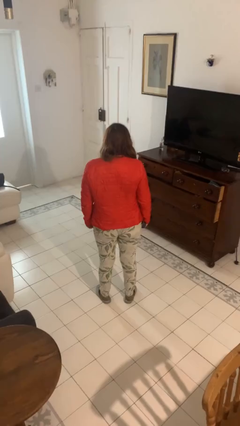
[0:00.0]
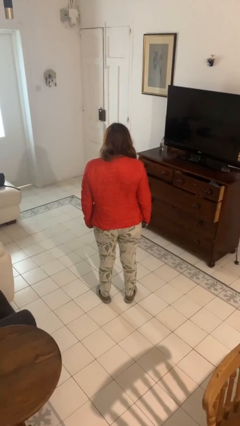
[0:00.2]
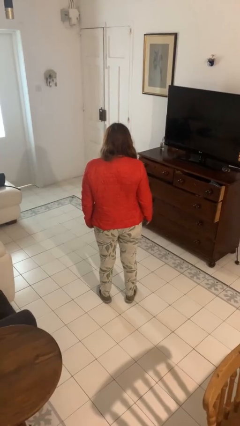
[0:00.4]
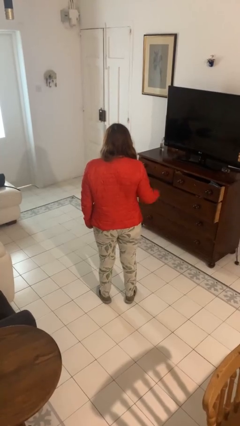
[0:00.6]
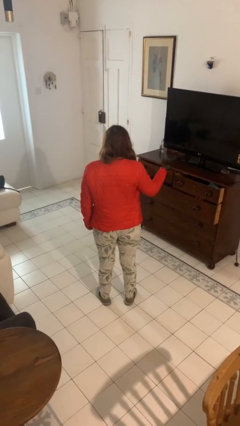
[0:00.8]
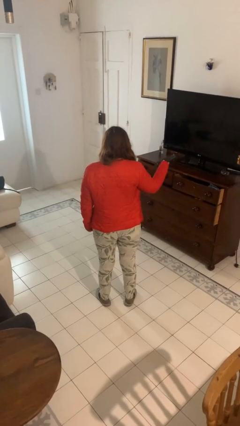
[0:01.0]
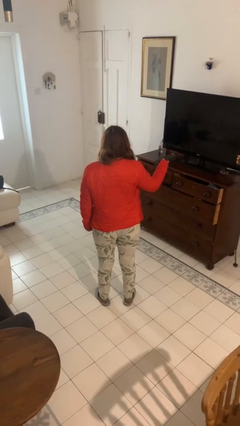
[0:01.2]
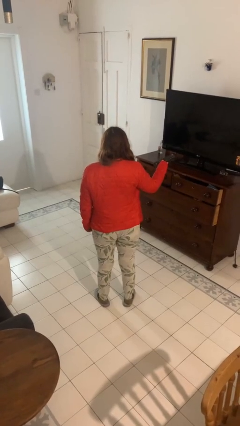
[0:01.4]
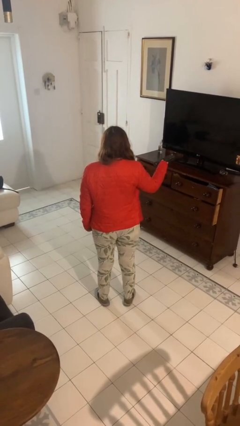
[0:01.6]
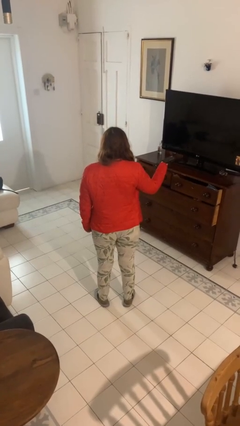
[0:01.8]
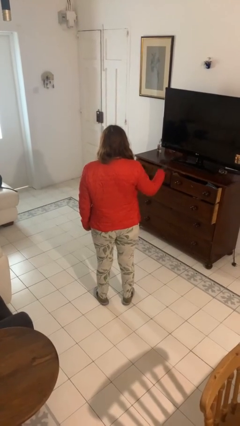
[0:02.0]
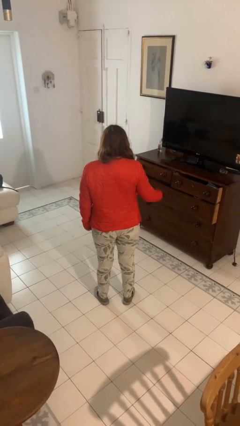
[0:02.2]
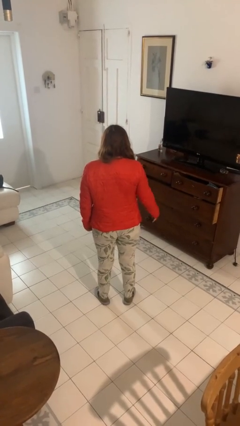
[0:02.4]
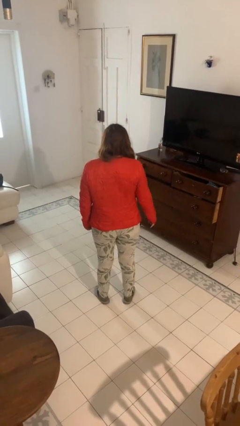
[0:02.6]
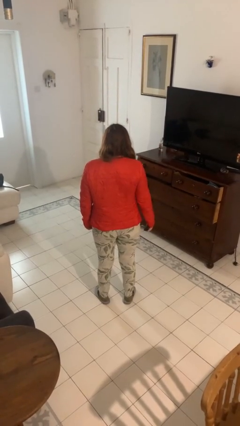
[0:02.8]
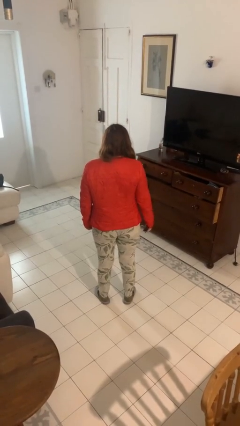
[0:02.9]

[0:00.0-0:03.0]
person uses television remote

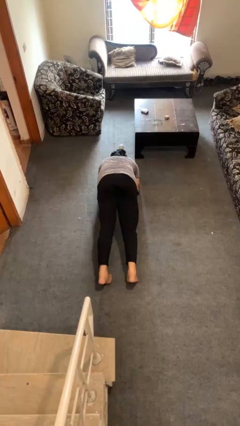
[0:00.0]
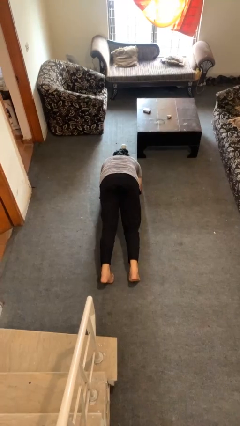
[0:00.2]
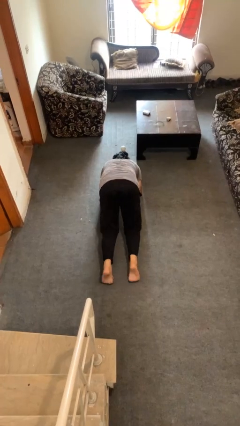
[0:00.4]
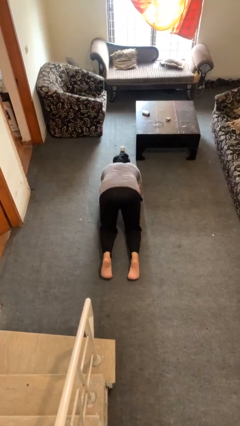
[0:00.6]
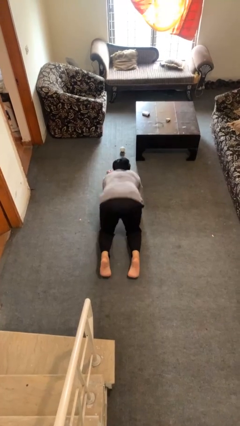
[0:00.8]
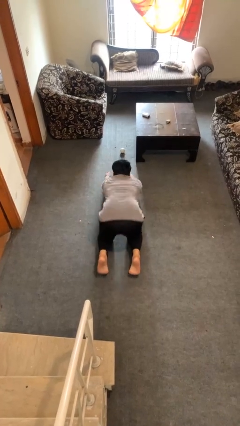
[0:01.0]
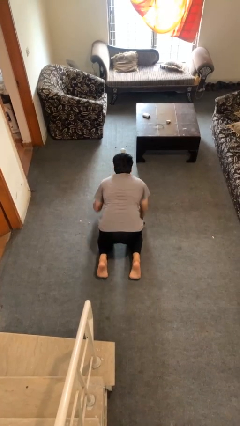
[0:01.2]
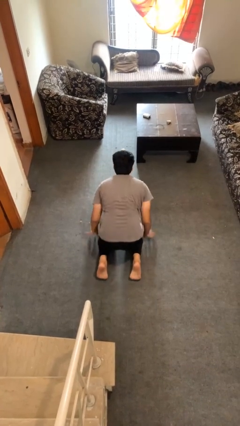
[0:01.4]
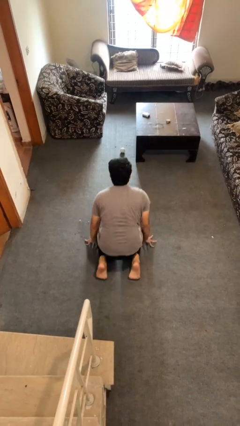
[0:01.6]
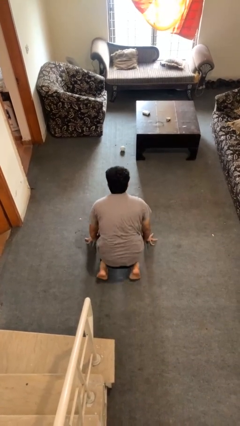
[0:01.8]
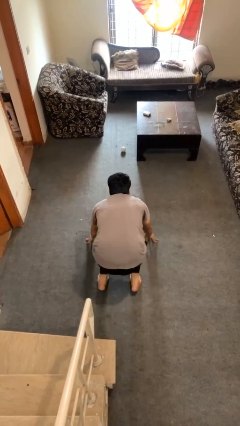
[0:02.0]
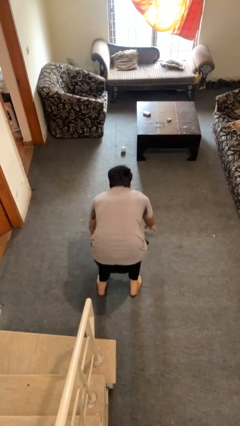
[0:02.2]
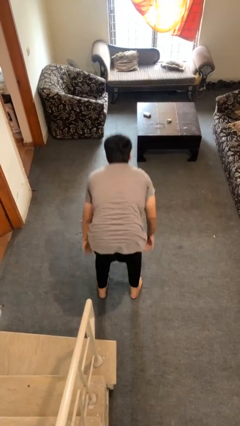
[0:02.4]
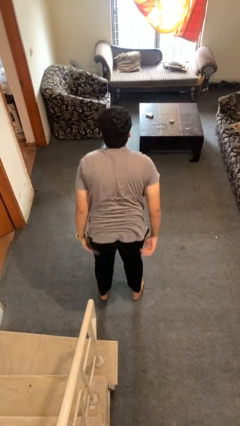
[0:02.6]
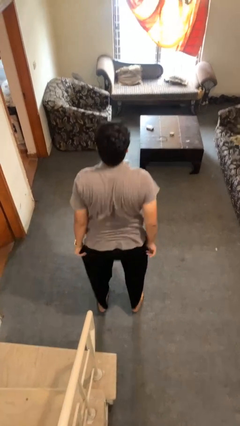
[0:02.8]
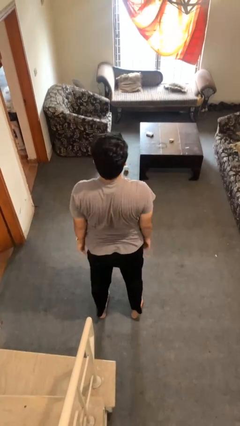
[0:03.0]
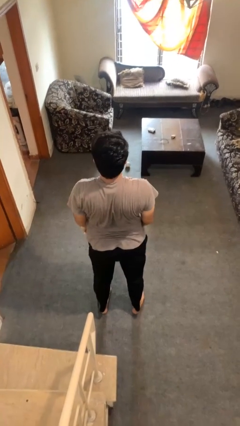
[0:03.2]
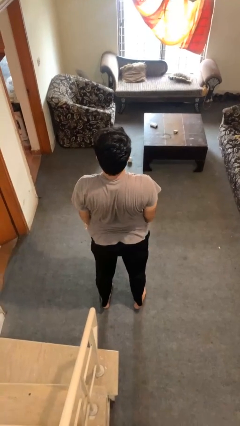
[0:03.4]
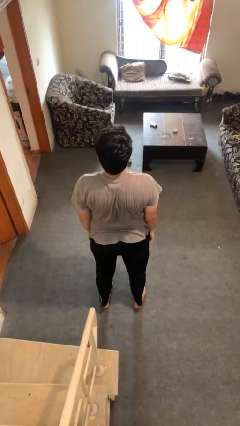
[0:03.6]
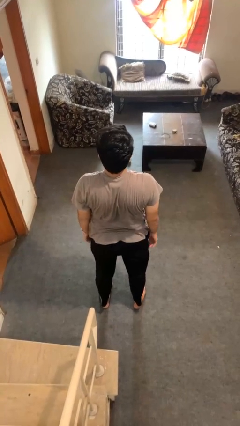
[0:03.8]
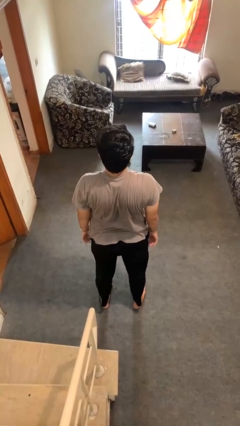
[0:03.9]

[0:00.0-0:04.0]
person stands up from floor

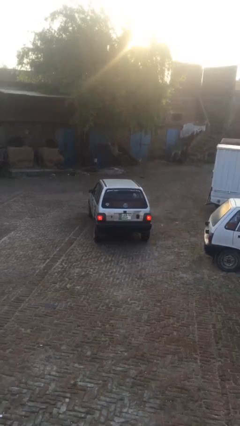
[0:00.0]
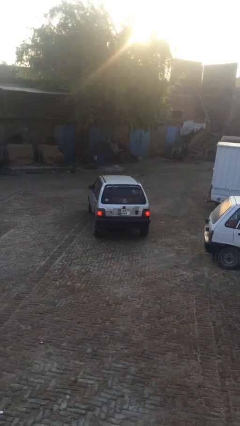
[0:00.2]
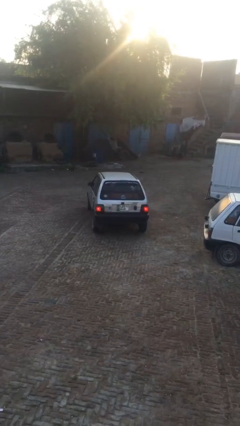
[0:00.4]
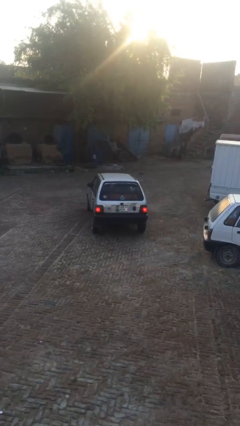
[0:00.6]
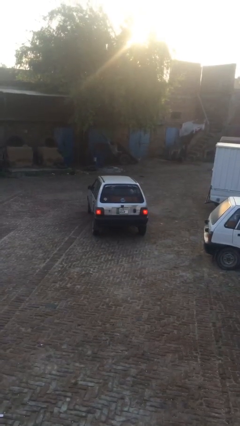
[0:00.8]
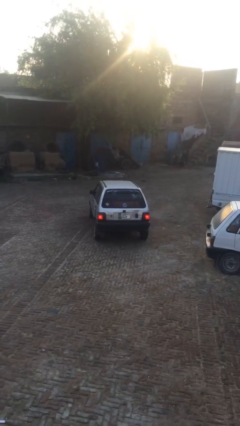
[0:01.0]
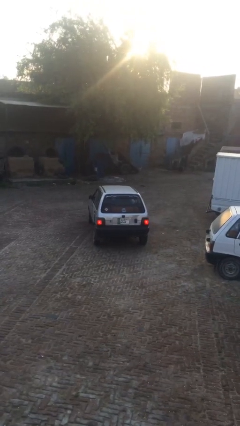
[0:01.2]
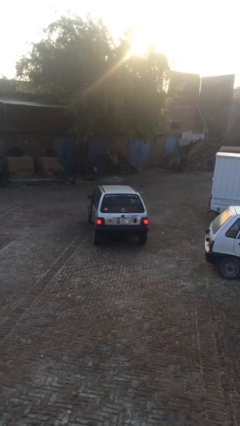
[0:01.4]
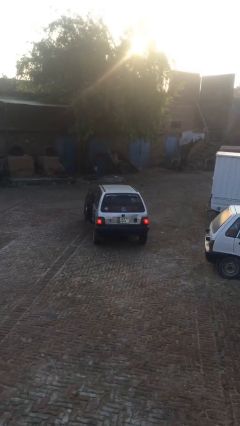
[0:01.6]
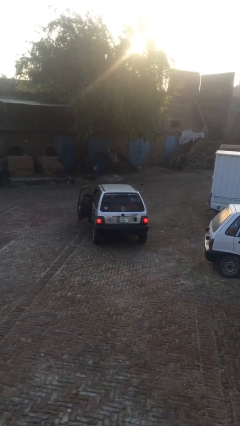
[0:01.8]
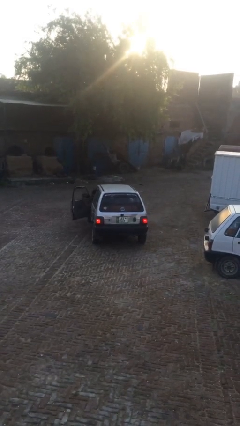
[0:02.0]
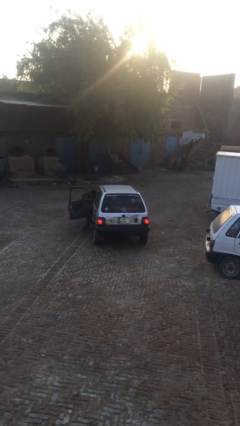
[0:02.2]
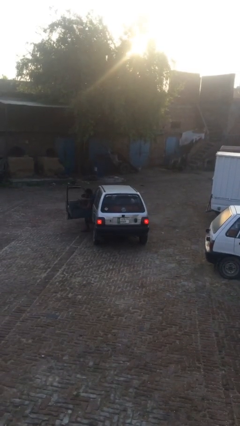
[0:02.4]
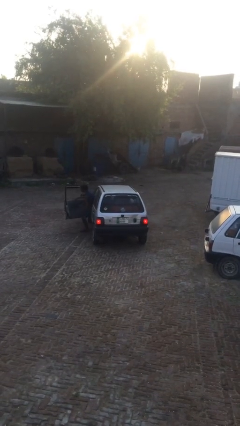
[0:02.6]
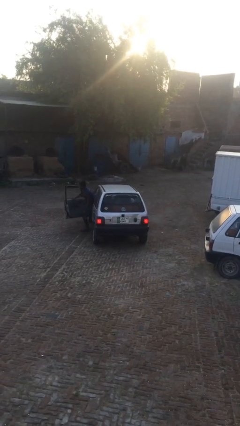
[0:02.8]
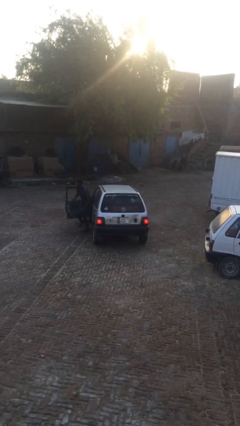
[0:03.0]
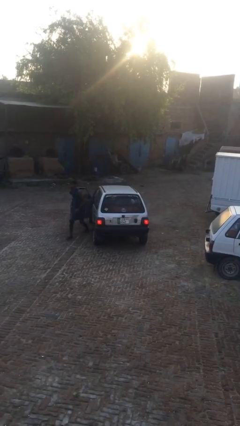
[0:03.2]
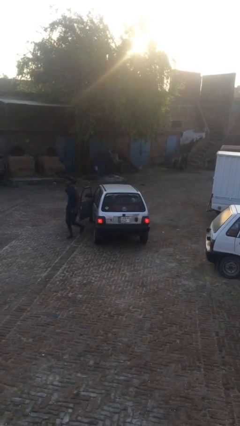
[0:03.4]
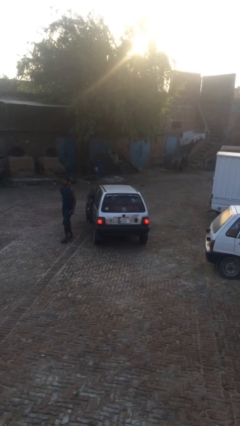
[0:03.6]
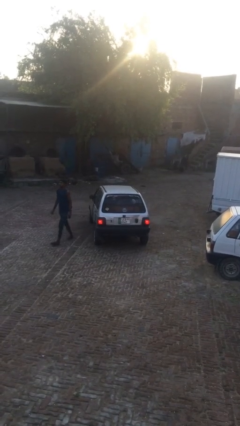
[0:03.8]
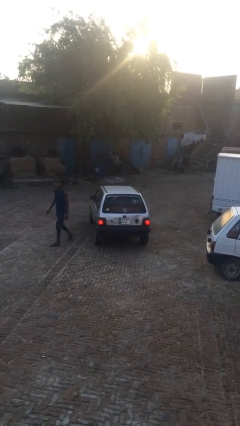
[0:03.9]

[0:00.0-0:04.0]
car drops off person

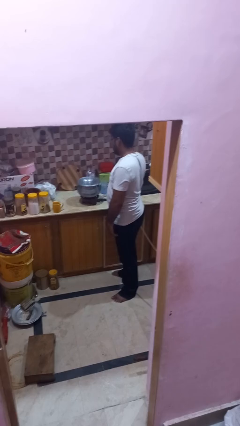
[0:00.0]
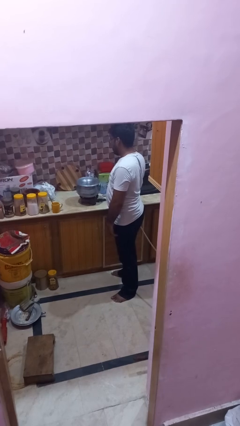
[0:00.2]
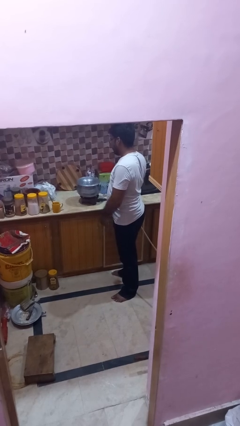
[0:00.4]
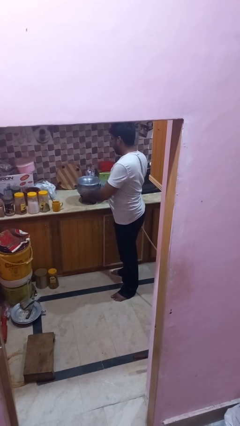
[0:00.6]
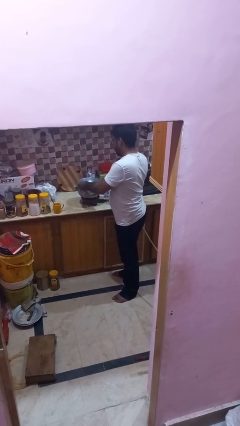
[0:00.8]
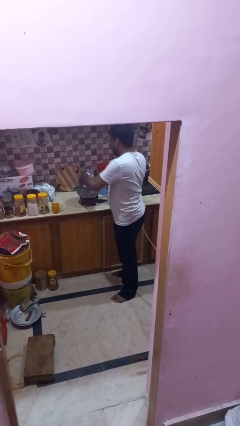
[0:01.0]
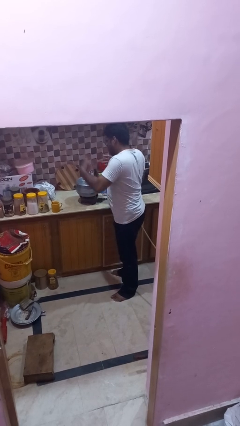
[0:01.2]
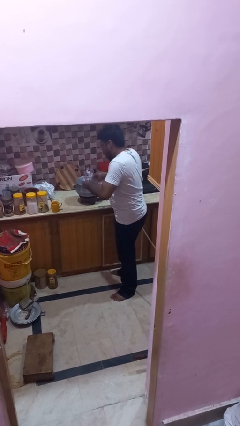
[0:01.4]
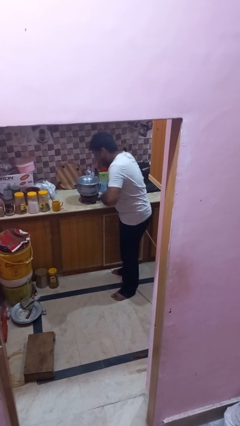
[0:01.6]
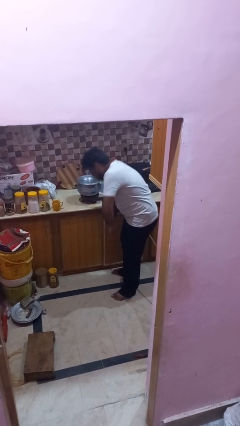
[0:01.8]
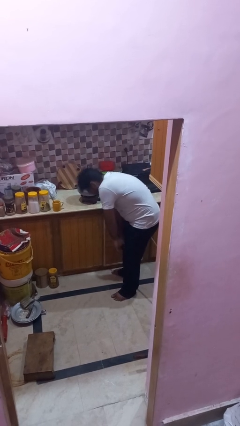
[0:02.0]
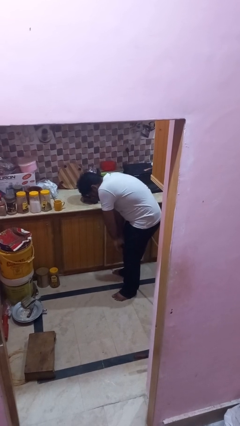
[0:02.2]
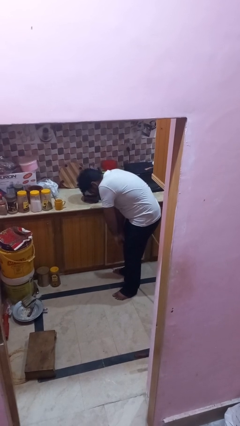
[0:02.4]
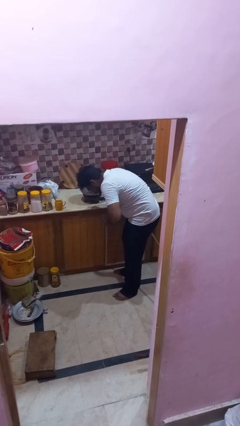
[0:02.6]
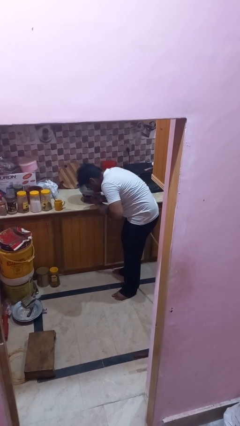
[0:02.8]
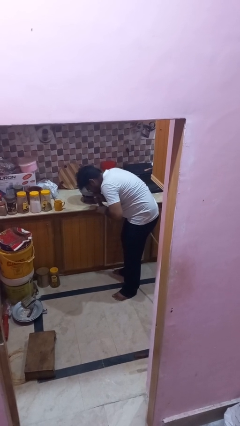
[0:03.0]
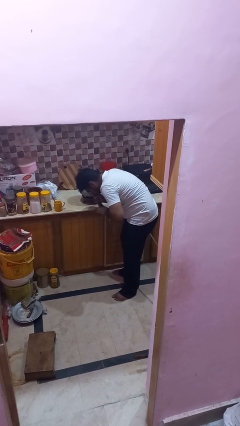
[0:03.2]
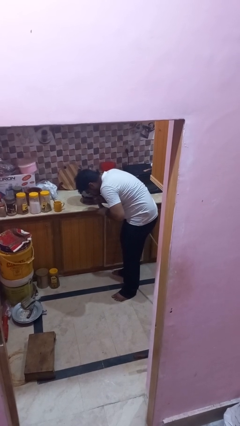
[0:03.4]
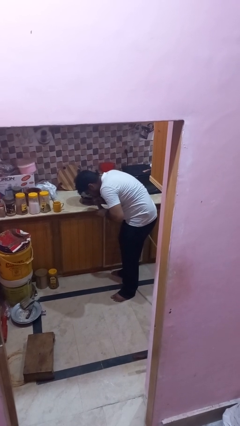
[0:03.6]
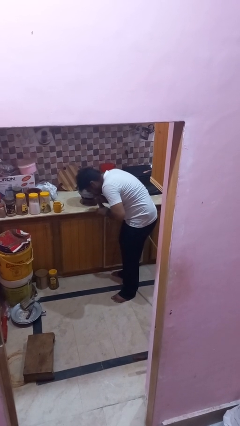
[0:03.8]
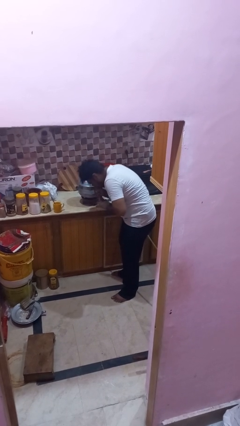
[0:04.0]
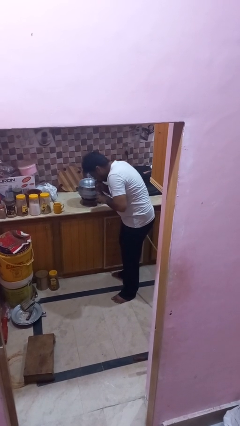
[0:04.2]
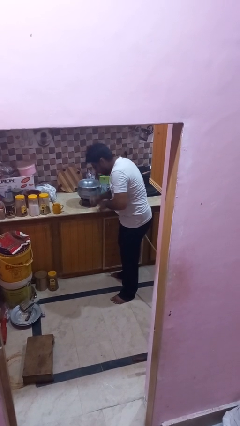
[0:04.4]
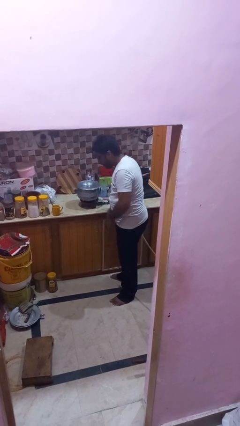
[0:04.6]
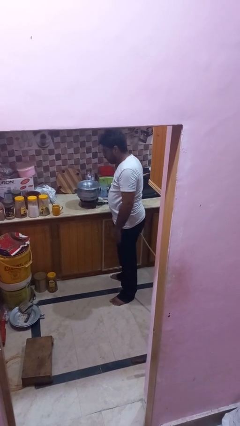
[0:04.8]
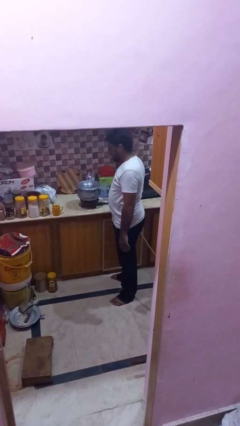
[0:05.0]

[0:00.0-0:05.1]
person burns hand

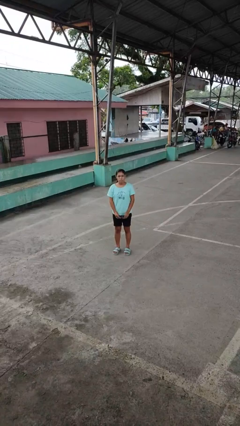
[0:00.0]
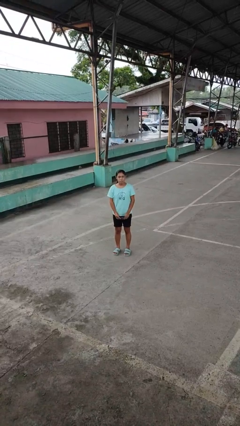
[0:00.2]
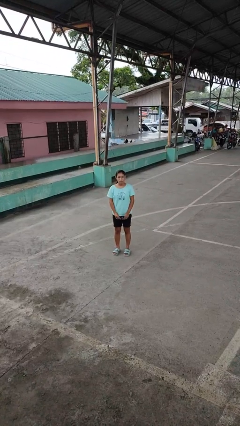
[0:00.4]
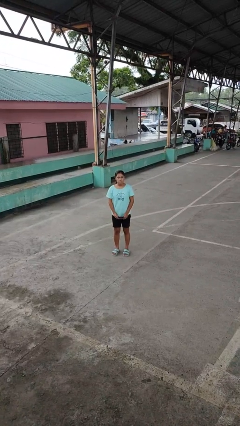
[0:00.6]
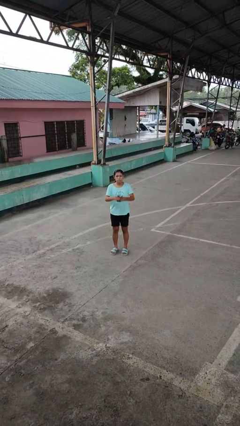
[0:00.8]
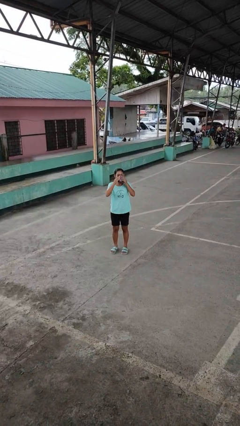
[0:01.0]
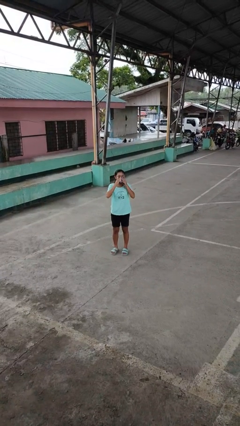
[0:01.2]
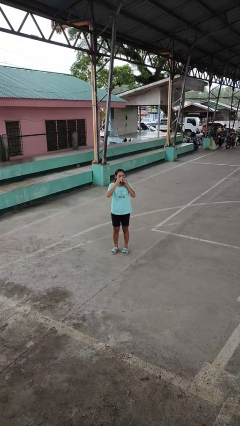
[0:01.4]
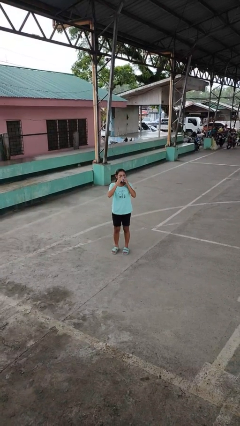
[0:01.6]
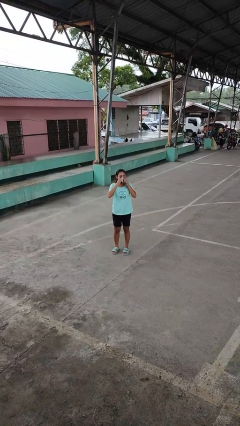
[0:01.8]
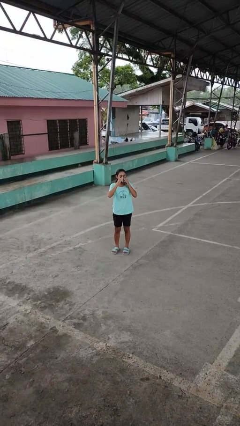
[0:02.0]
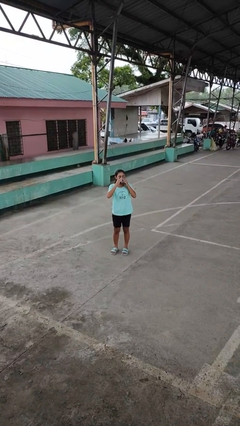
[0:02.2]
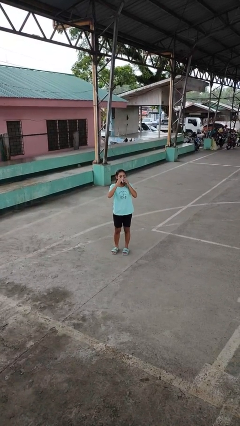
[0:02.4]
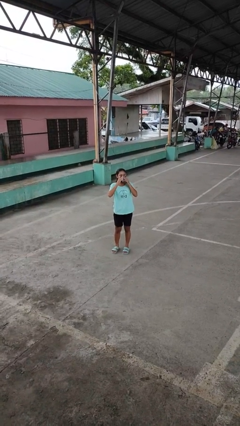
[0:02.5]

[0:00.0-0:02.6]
person blows nose
